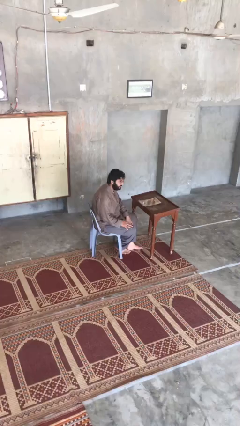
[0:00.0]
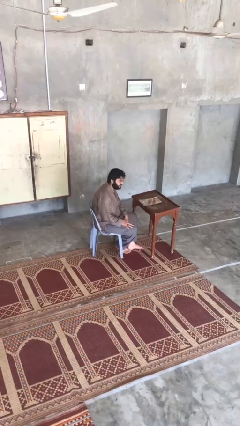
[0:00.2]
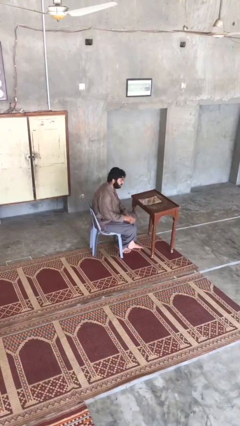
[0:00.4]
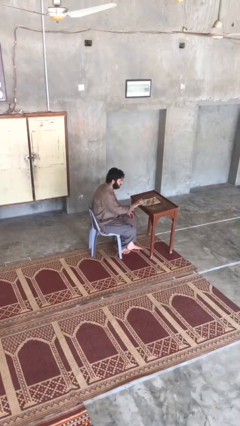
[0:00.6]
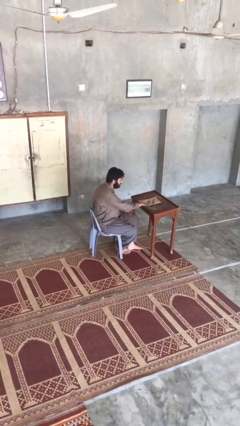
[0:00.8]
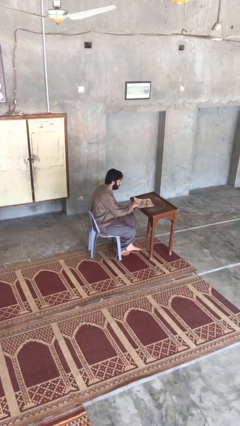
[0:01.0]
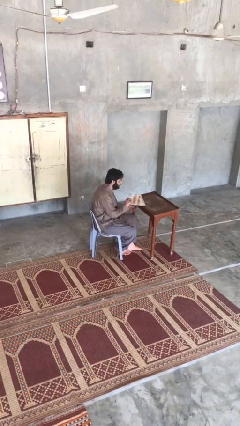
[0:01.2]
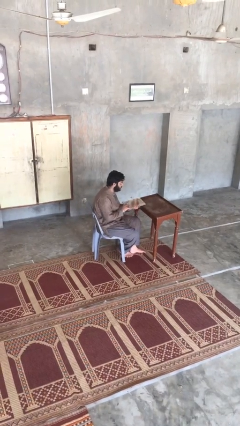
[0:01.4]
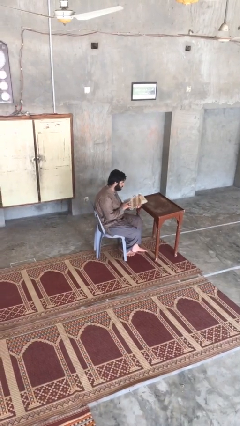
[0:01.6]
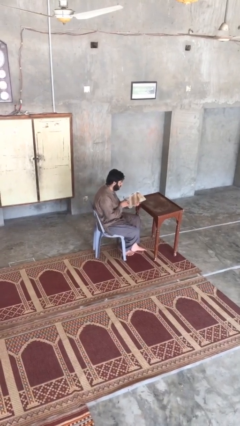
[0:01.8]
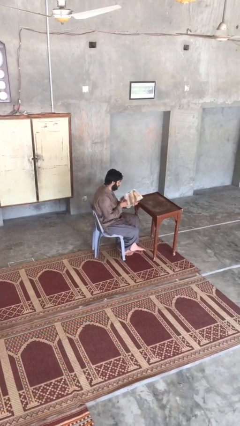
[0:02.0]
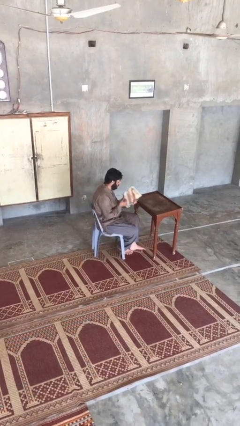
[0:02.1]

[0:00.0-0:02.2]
person picks up object from table

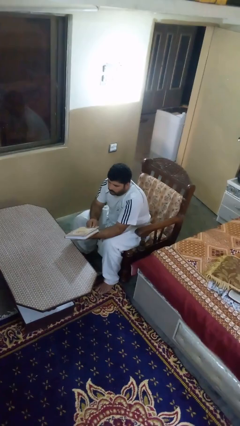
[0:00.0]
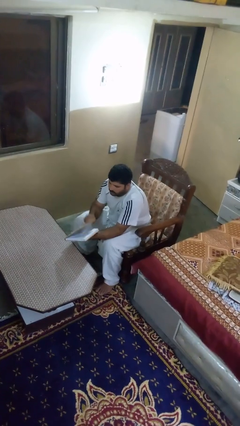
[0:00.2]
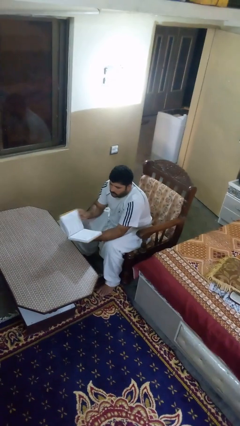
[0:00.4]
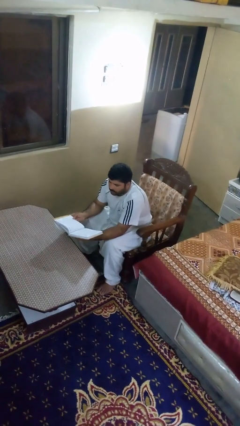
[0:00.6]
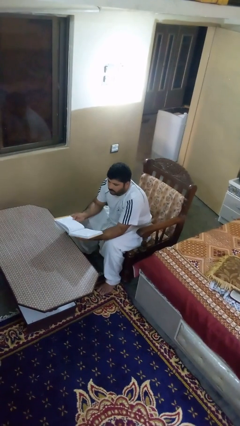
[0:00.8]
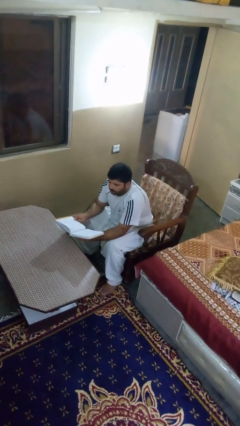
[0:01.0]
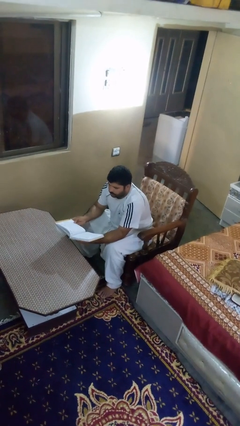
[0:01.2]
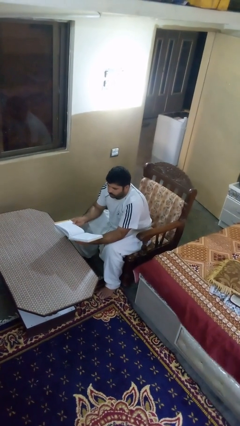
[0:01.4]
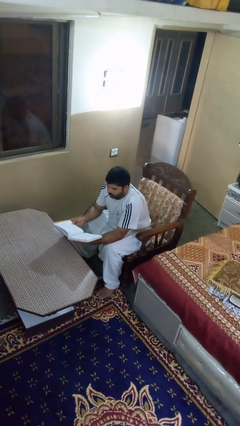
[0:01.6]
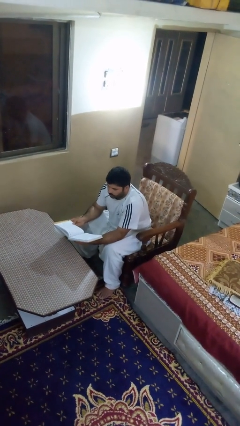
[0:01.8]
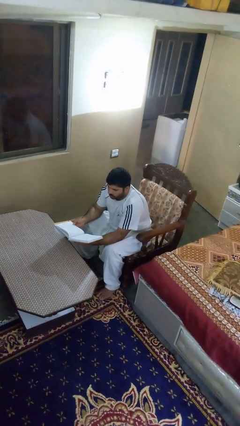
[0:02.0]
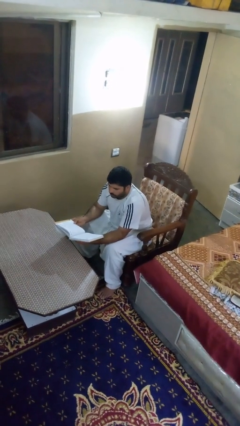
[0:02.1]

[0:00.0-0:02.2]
person reads book

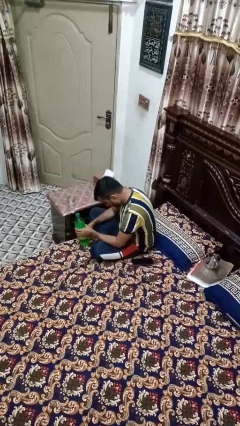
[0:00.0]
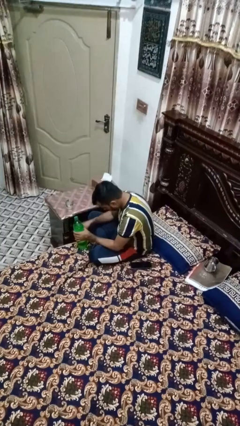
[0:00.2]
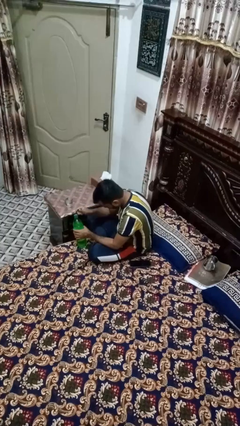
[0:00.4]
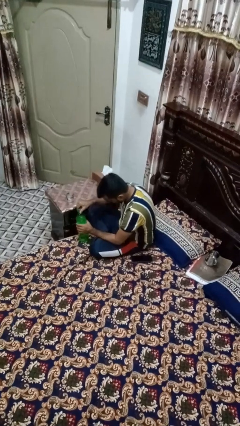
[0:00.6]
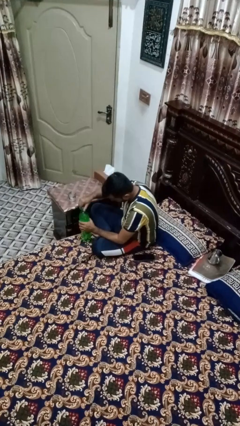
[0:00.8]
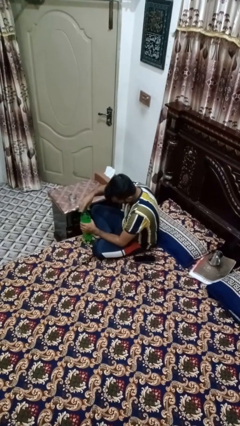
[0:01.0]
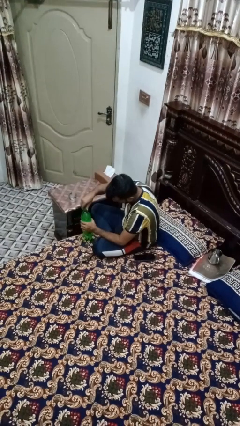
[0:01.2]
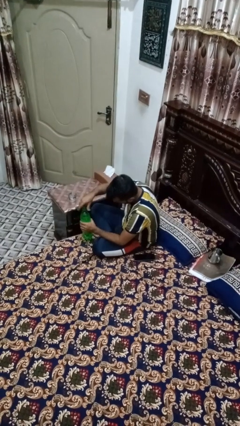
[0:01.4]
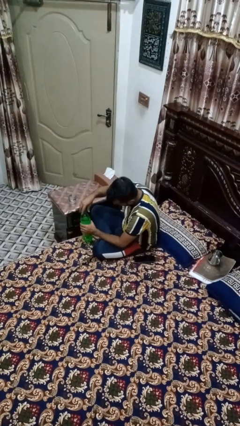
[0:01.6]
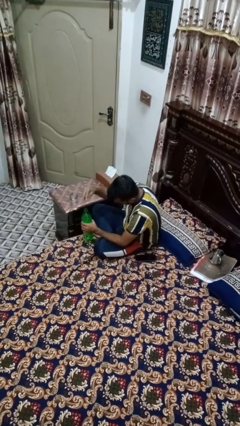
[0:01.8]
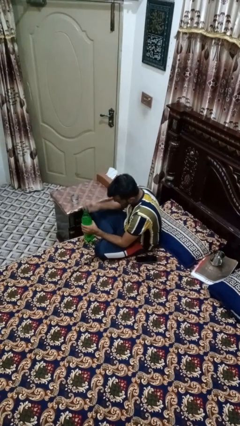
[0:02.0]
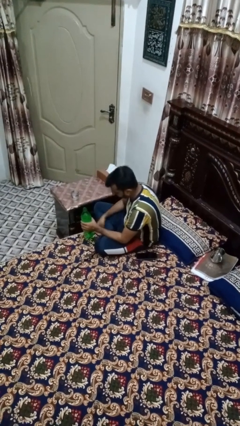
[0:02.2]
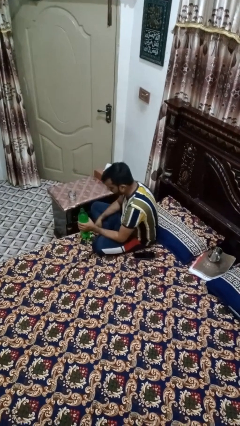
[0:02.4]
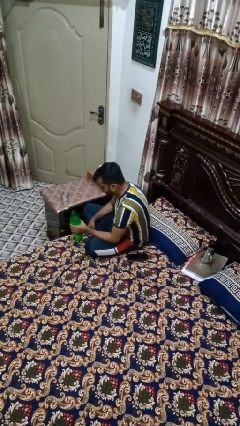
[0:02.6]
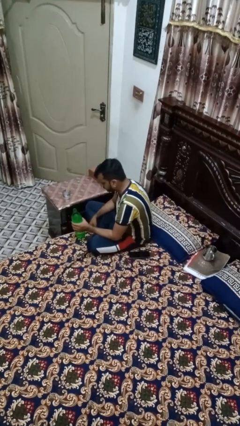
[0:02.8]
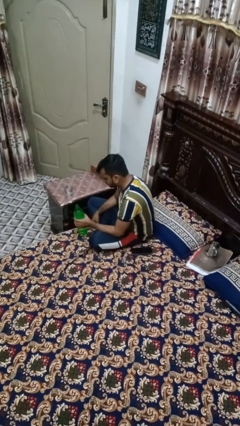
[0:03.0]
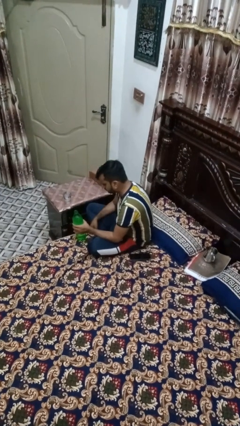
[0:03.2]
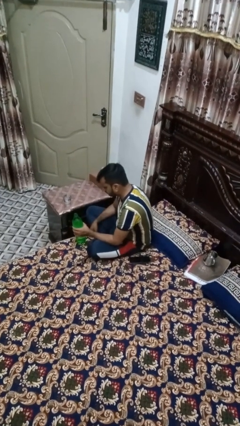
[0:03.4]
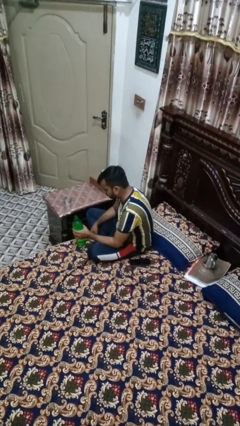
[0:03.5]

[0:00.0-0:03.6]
person unscrews lid from bottle

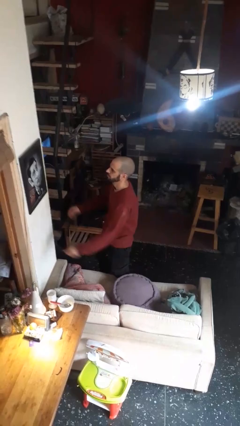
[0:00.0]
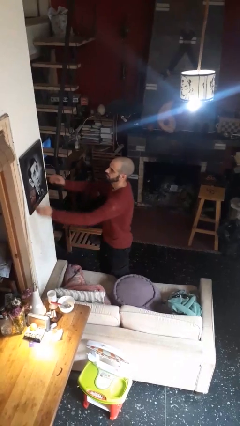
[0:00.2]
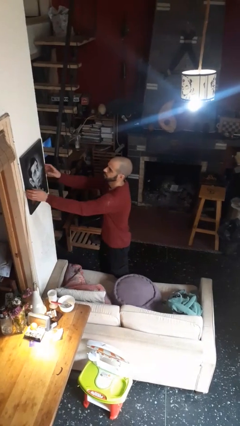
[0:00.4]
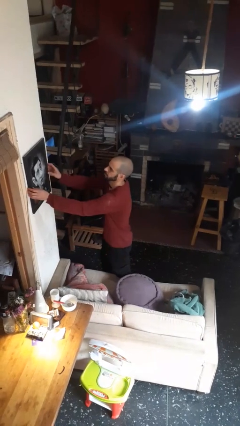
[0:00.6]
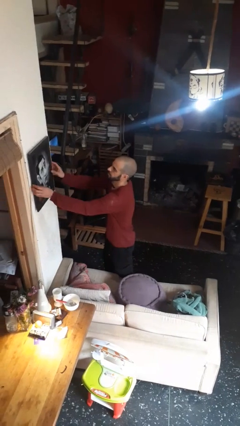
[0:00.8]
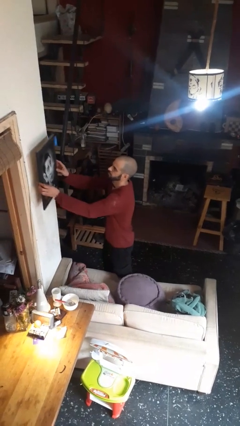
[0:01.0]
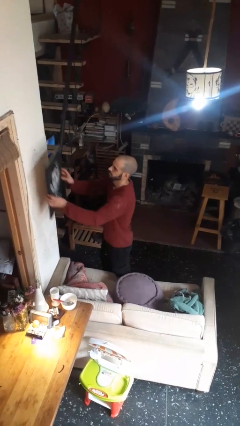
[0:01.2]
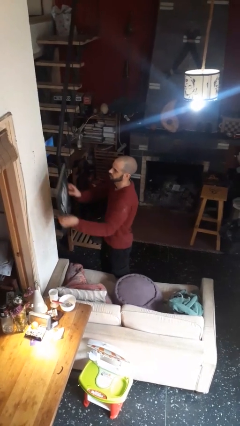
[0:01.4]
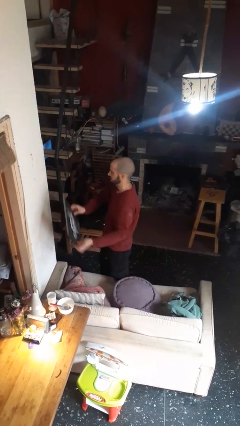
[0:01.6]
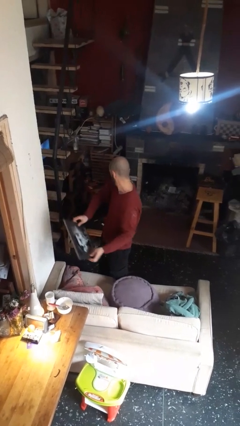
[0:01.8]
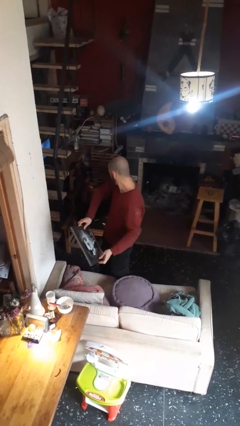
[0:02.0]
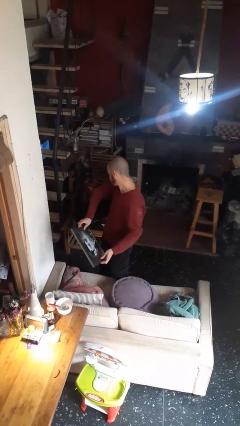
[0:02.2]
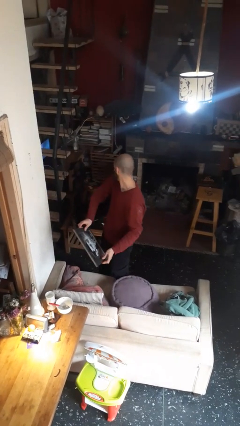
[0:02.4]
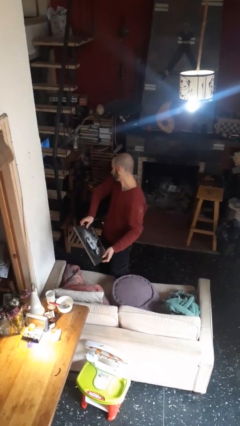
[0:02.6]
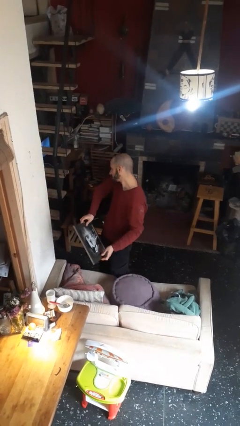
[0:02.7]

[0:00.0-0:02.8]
person takes down picture frame

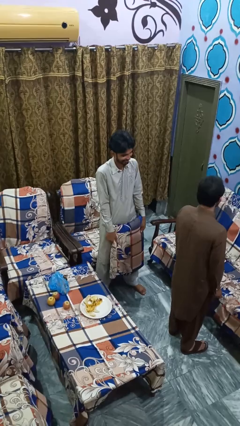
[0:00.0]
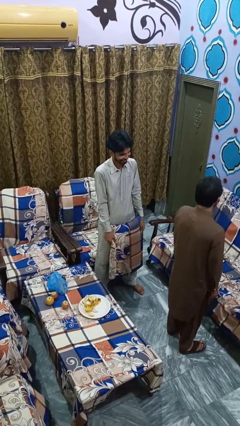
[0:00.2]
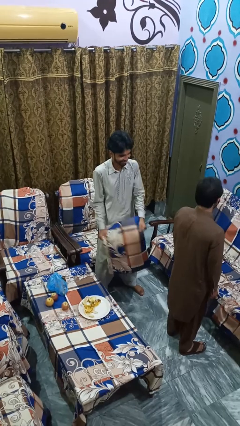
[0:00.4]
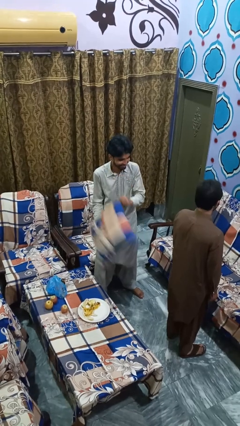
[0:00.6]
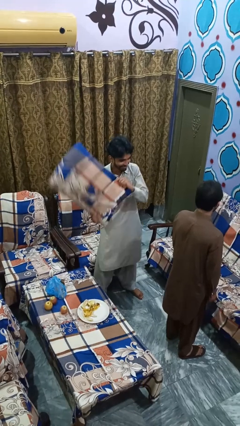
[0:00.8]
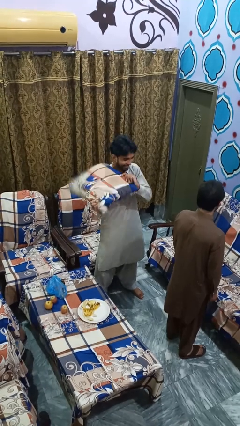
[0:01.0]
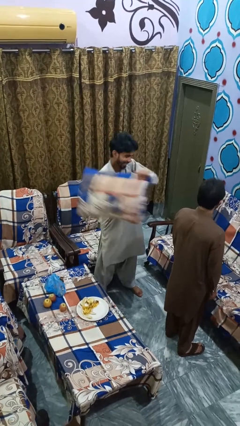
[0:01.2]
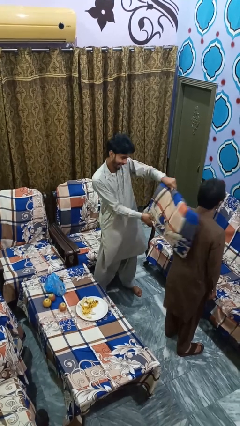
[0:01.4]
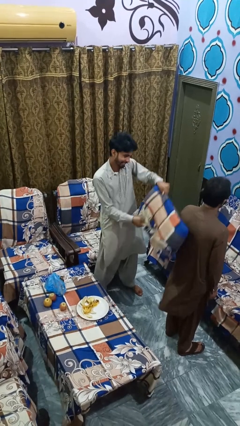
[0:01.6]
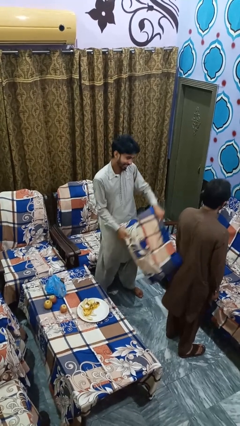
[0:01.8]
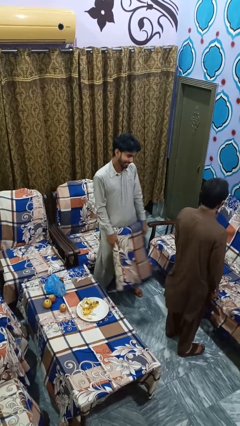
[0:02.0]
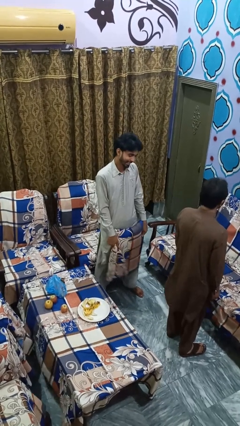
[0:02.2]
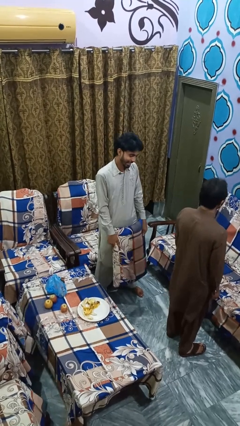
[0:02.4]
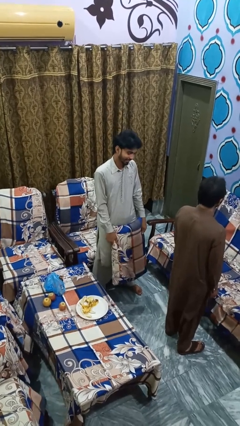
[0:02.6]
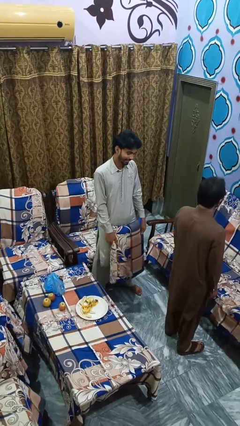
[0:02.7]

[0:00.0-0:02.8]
person hits person with pillow

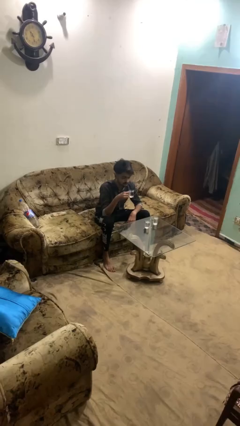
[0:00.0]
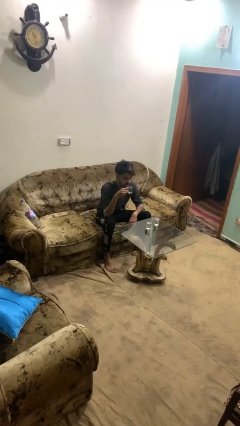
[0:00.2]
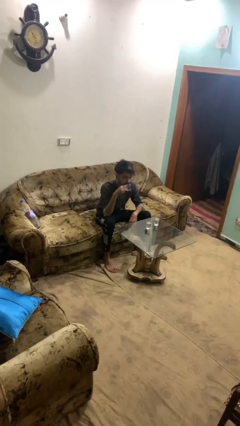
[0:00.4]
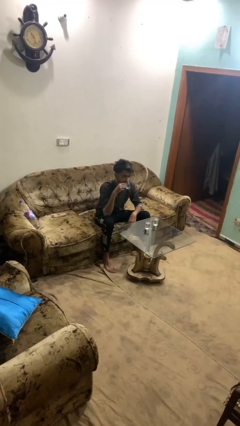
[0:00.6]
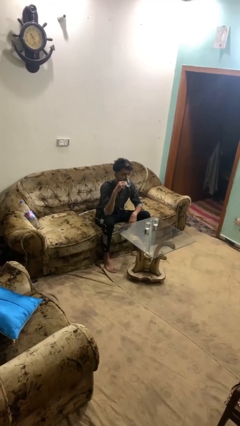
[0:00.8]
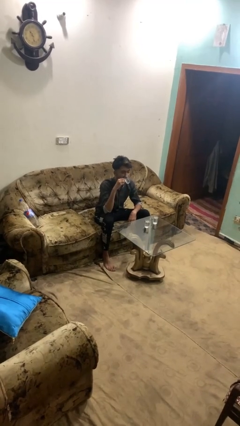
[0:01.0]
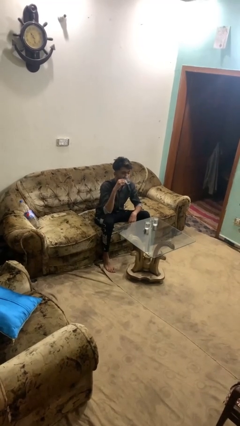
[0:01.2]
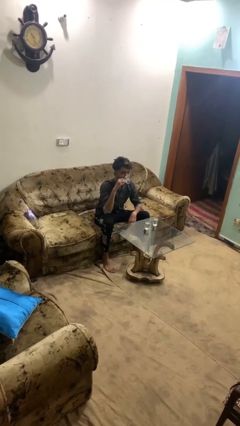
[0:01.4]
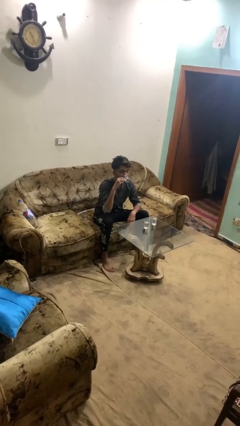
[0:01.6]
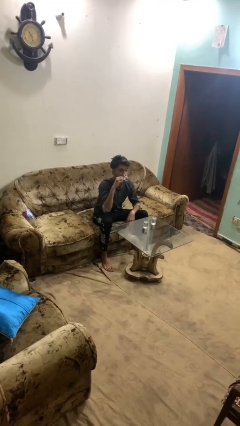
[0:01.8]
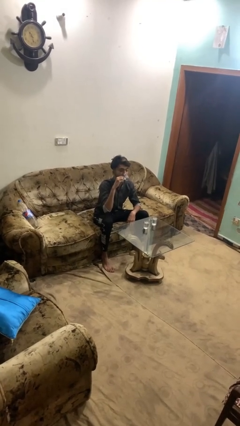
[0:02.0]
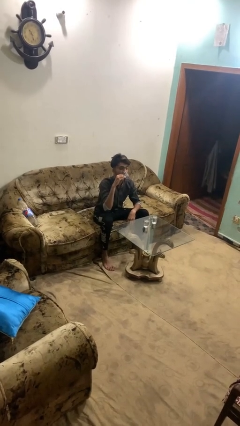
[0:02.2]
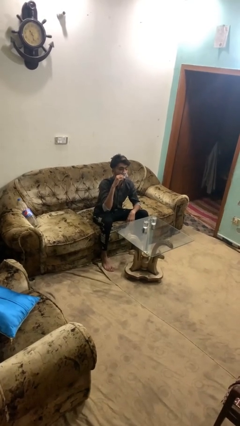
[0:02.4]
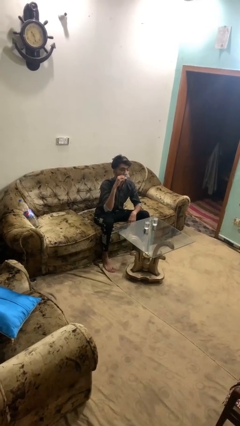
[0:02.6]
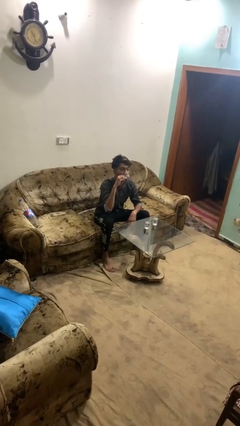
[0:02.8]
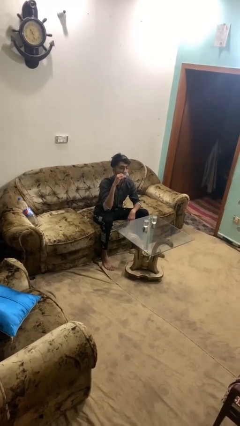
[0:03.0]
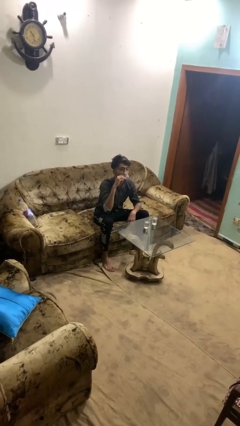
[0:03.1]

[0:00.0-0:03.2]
person drinks from shotglass

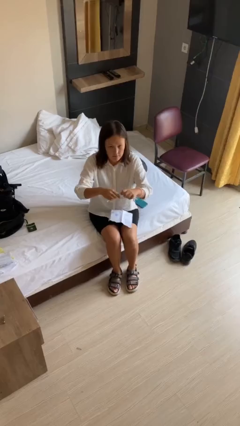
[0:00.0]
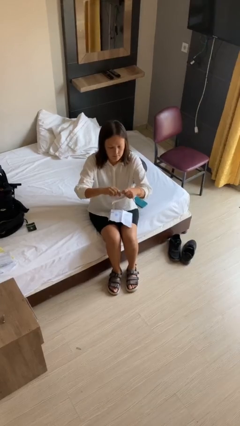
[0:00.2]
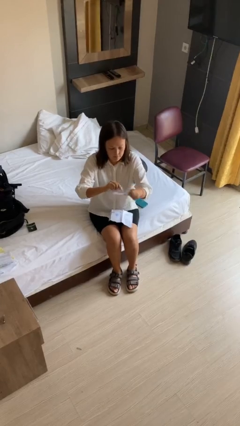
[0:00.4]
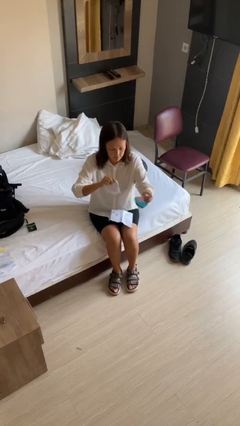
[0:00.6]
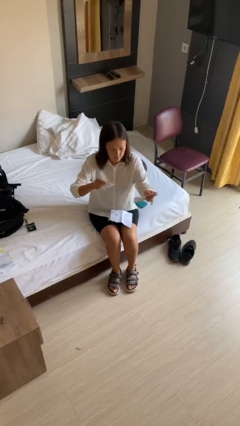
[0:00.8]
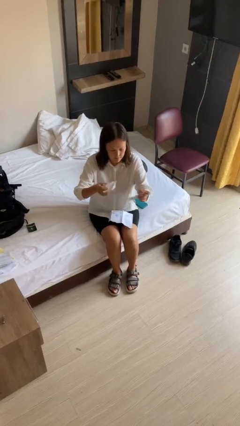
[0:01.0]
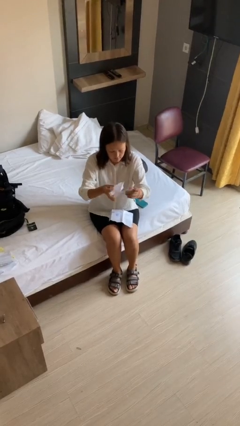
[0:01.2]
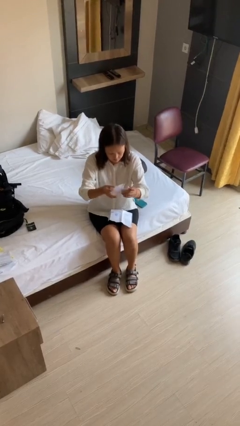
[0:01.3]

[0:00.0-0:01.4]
person tears paper
